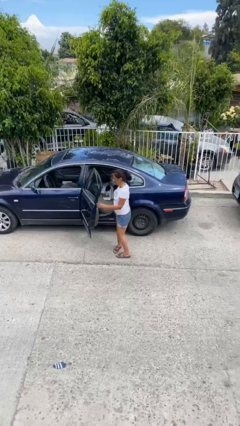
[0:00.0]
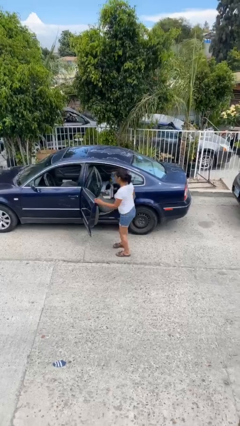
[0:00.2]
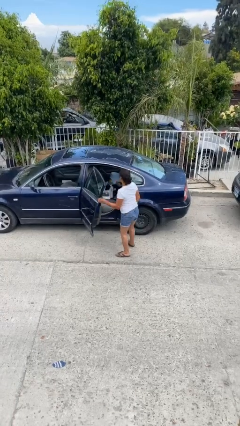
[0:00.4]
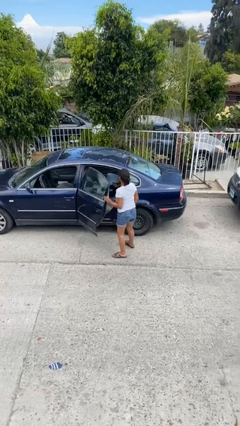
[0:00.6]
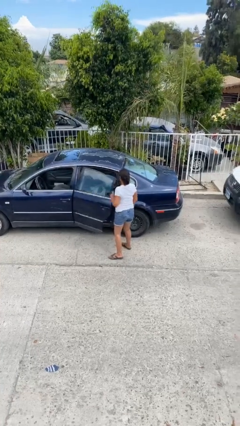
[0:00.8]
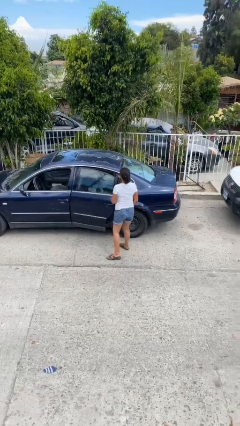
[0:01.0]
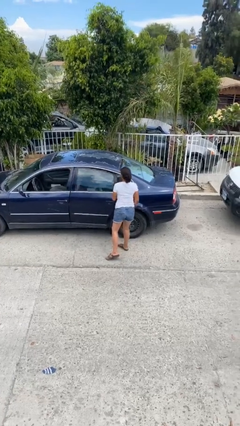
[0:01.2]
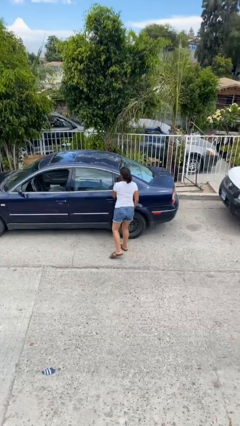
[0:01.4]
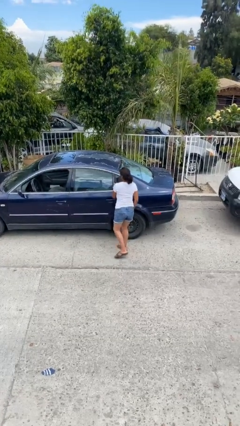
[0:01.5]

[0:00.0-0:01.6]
person closes car door

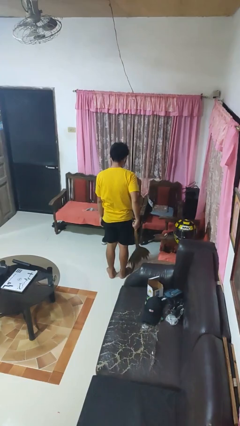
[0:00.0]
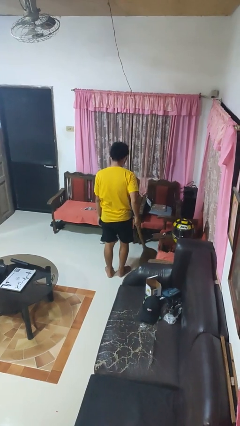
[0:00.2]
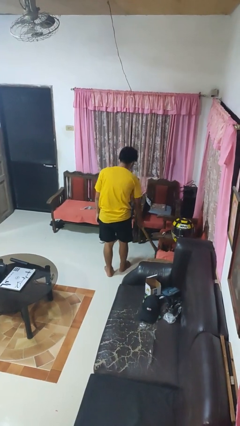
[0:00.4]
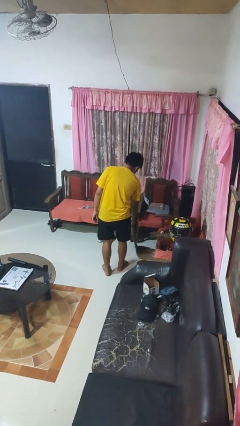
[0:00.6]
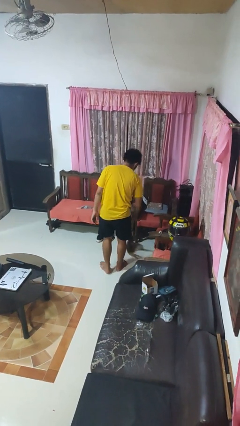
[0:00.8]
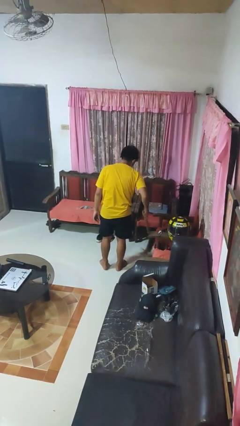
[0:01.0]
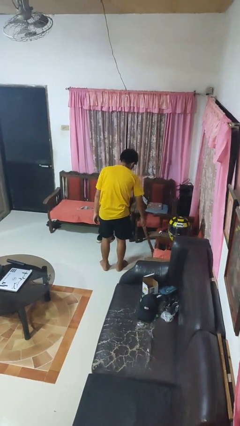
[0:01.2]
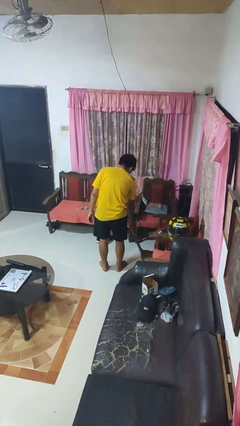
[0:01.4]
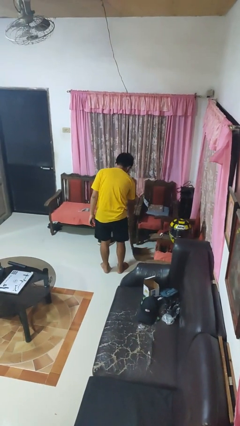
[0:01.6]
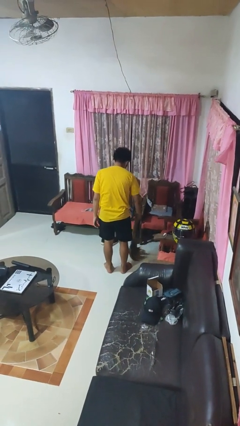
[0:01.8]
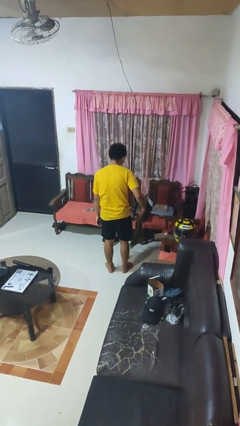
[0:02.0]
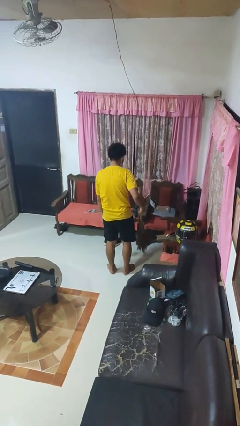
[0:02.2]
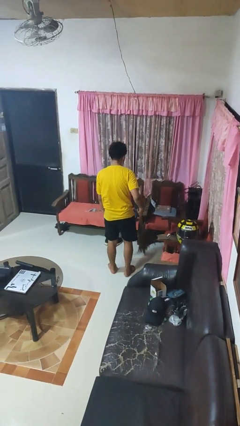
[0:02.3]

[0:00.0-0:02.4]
person sweeps floor

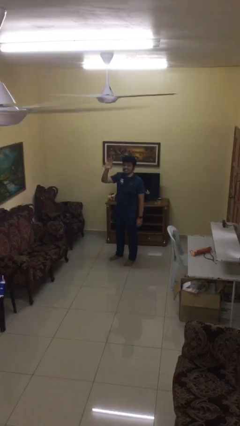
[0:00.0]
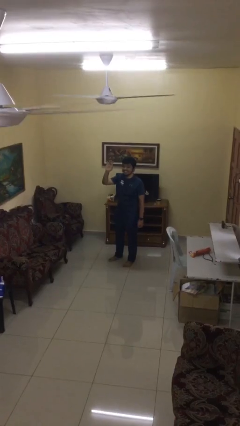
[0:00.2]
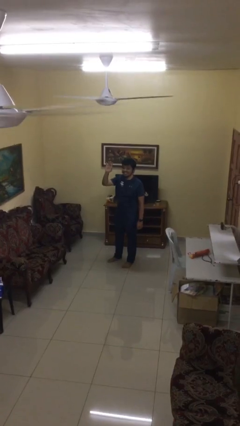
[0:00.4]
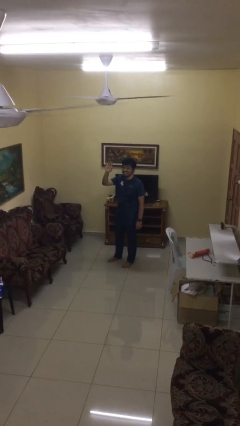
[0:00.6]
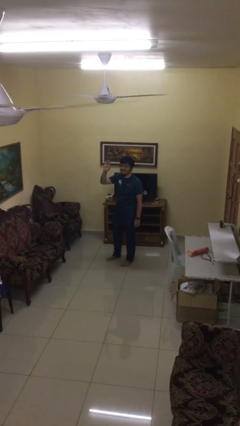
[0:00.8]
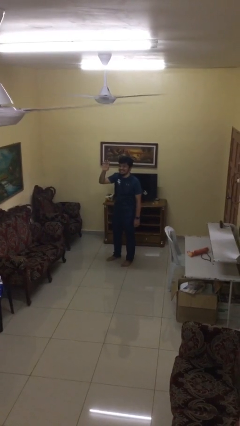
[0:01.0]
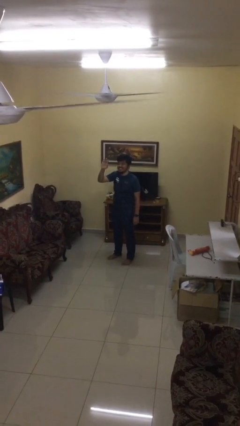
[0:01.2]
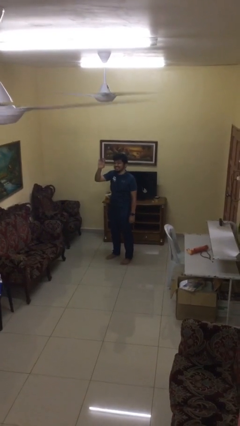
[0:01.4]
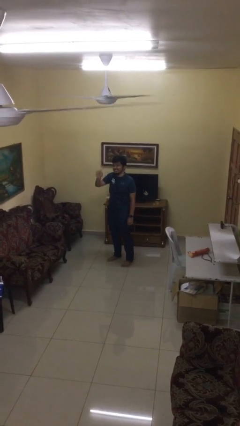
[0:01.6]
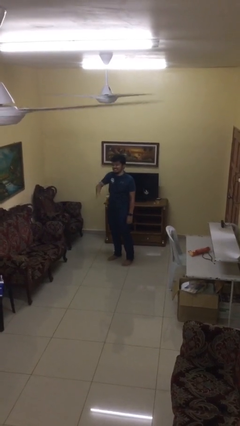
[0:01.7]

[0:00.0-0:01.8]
person gestures lower hand

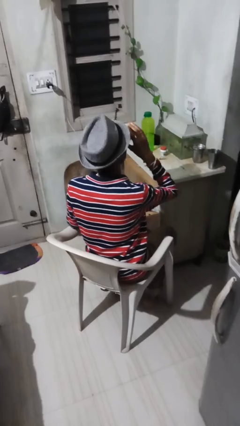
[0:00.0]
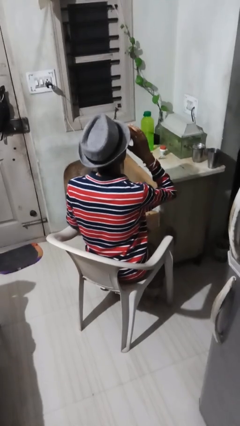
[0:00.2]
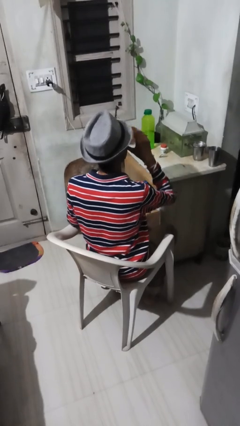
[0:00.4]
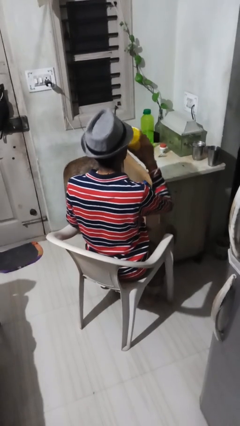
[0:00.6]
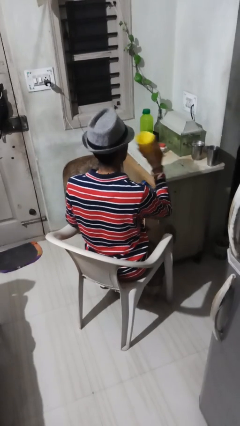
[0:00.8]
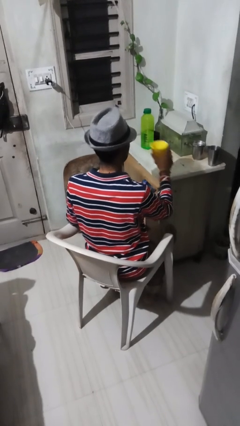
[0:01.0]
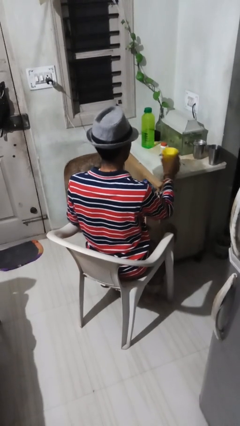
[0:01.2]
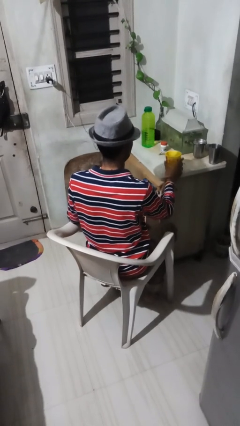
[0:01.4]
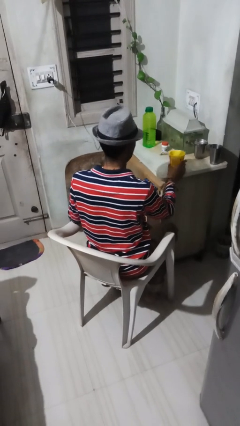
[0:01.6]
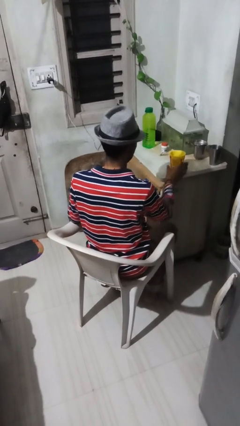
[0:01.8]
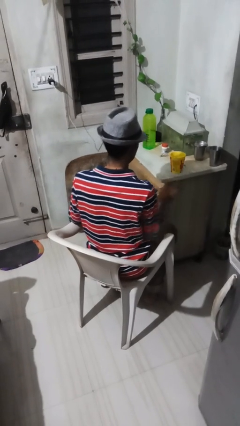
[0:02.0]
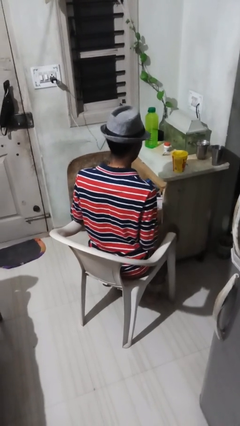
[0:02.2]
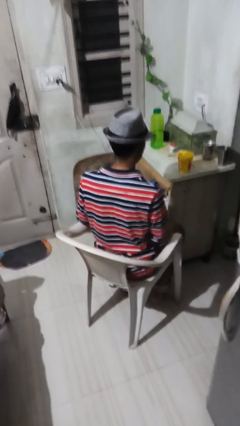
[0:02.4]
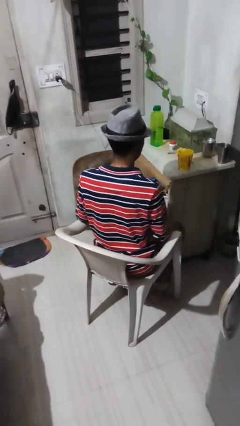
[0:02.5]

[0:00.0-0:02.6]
person puts down object on table

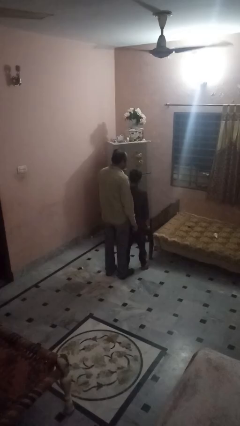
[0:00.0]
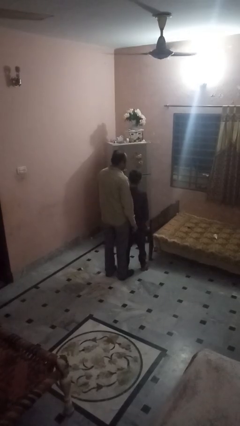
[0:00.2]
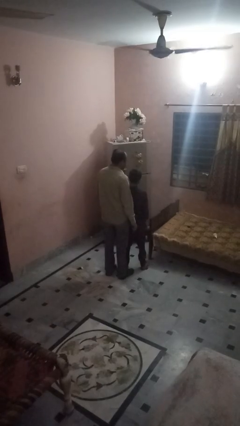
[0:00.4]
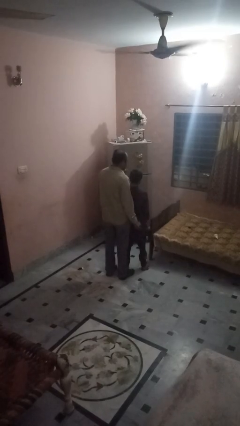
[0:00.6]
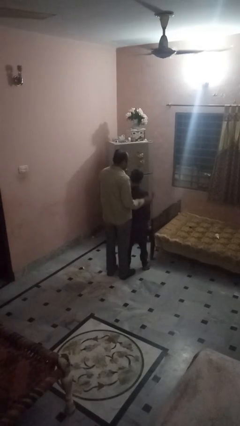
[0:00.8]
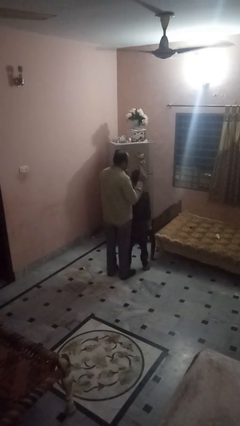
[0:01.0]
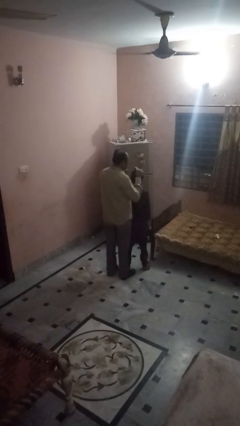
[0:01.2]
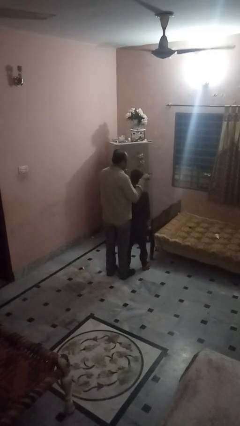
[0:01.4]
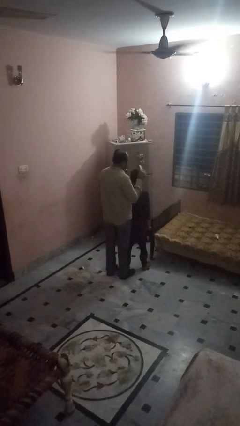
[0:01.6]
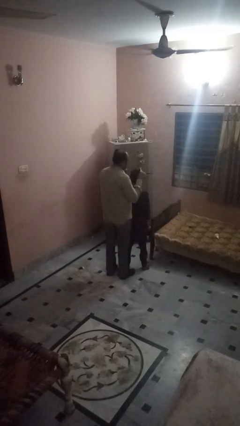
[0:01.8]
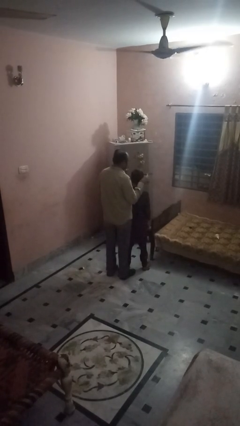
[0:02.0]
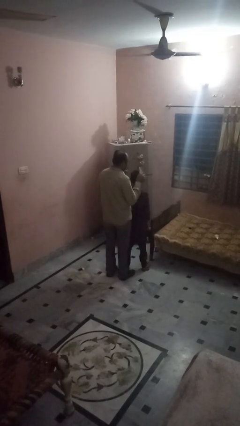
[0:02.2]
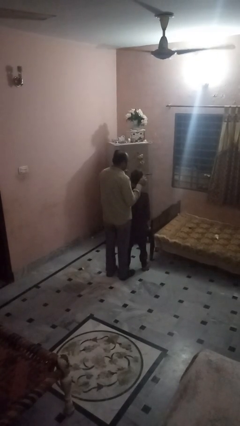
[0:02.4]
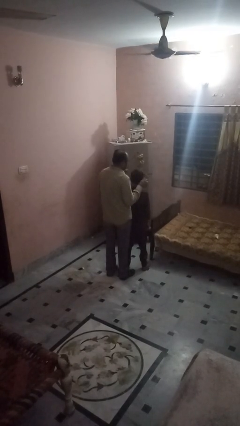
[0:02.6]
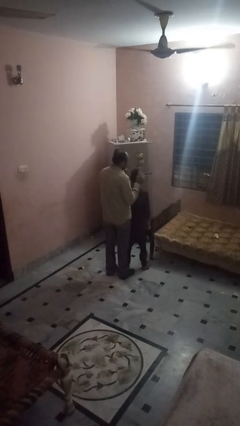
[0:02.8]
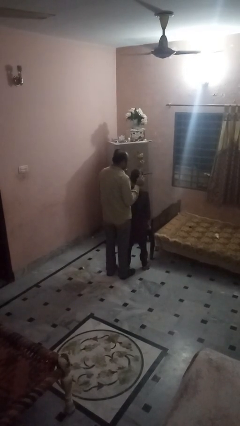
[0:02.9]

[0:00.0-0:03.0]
person brushes hair of person

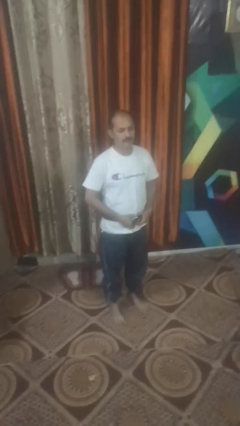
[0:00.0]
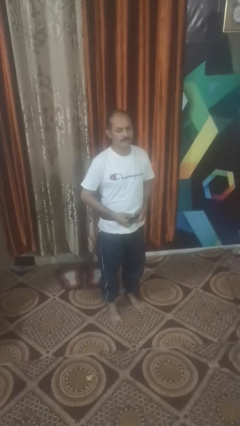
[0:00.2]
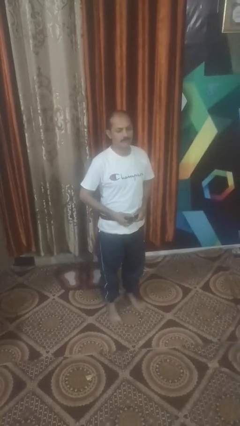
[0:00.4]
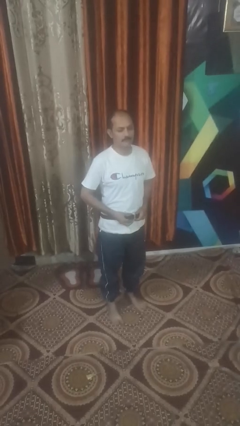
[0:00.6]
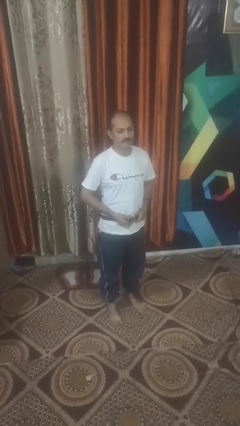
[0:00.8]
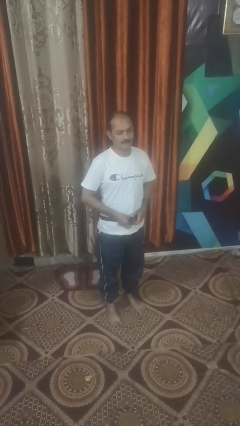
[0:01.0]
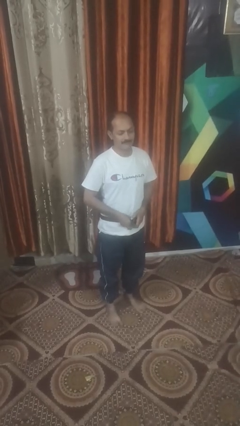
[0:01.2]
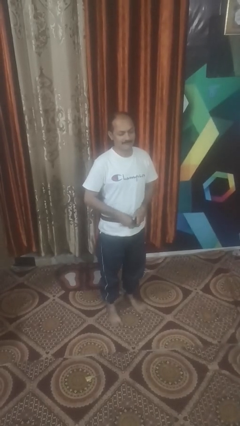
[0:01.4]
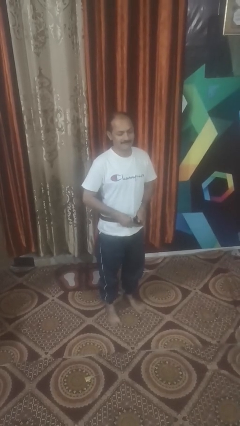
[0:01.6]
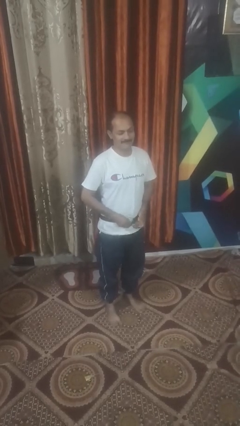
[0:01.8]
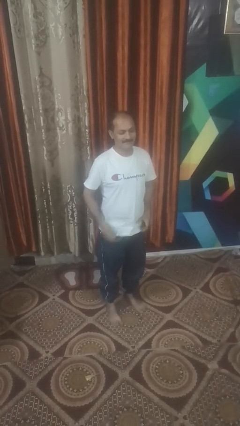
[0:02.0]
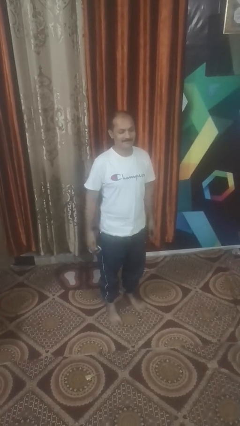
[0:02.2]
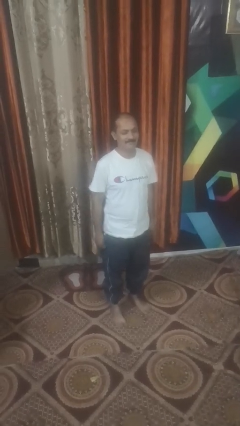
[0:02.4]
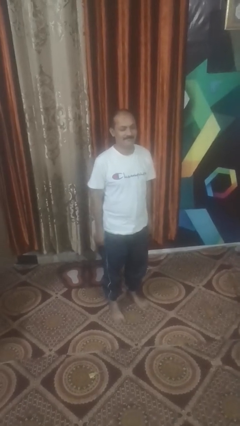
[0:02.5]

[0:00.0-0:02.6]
person takes off belt

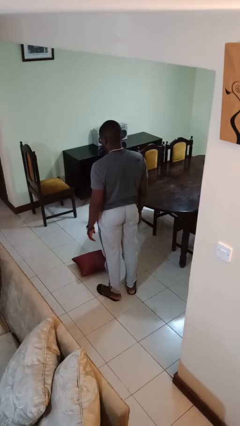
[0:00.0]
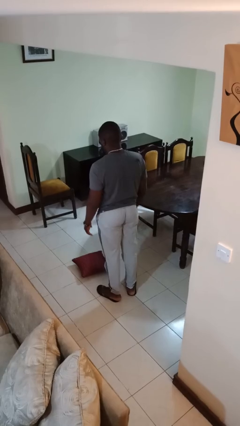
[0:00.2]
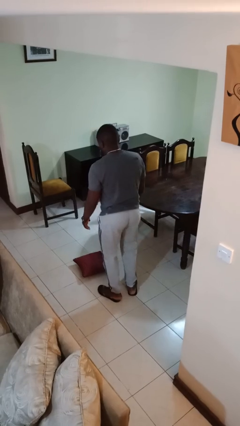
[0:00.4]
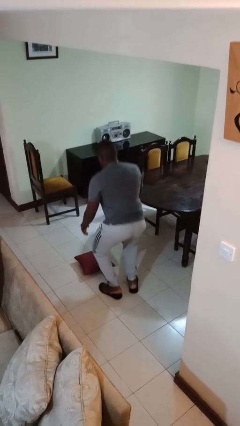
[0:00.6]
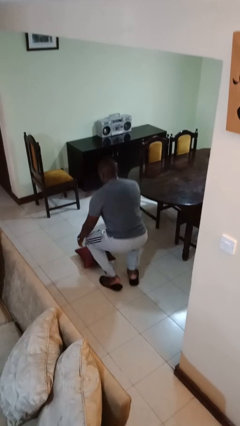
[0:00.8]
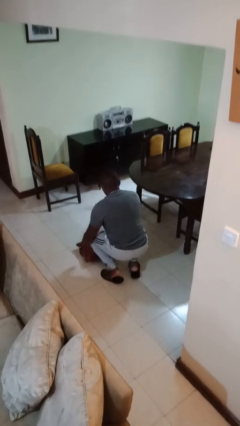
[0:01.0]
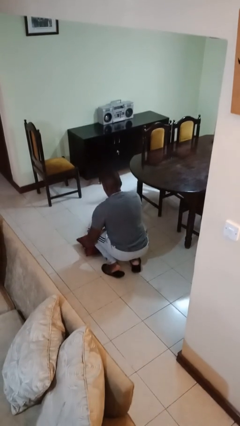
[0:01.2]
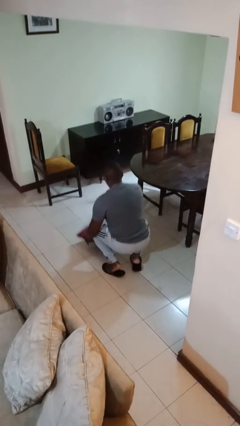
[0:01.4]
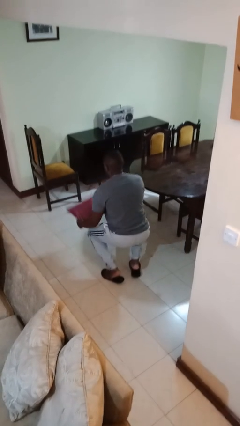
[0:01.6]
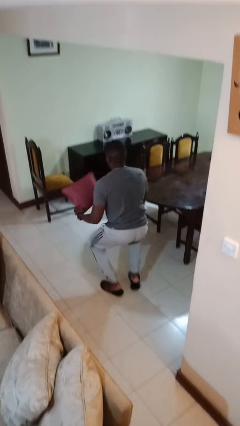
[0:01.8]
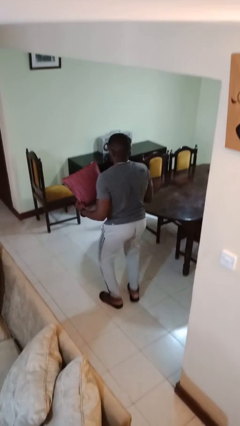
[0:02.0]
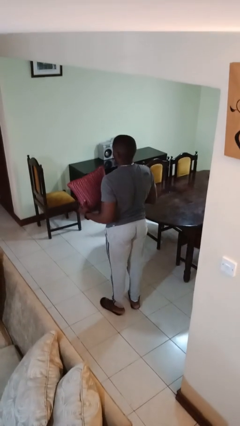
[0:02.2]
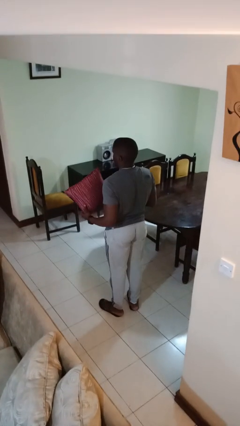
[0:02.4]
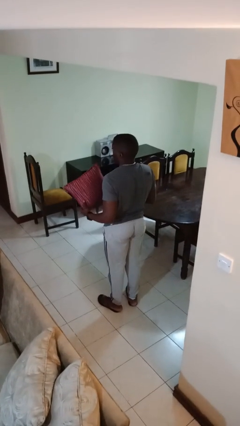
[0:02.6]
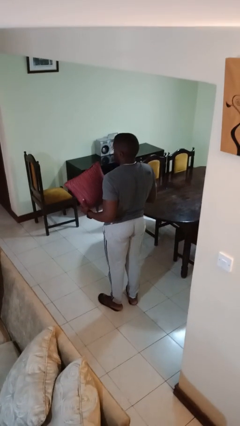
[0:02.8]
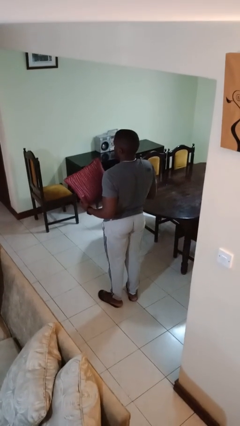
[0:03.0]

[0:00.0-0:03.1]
person picks up object from floor
